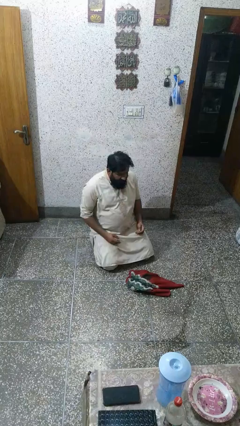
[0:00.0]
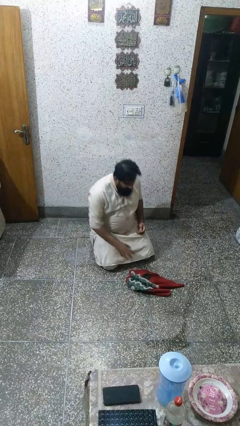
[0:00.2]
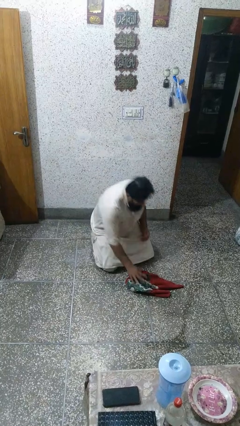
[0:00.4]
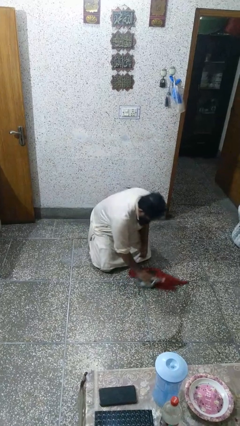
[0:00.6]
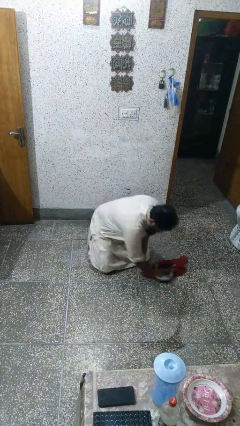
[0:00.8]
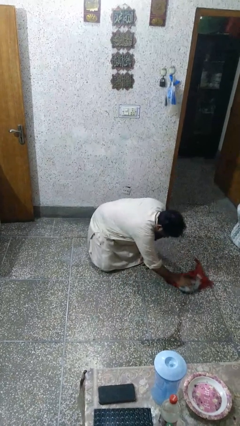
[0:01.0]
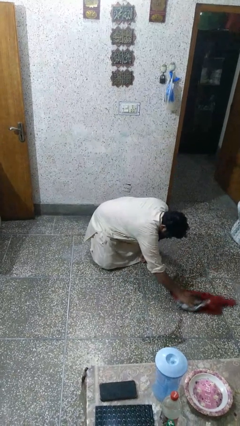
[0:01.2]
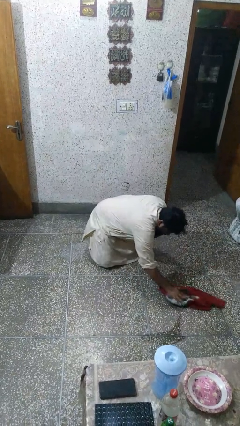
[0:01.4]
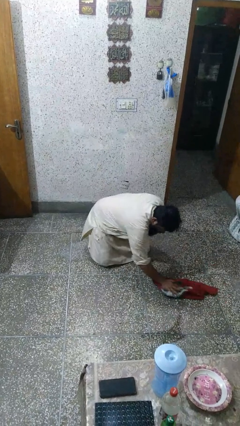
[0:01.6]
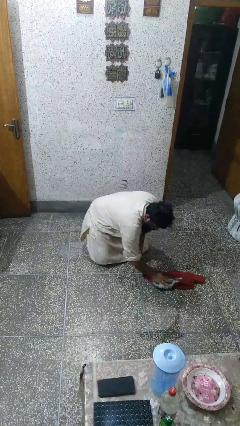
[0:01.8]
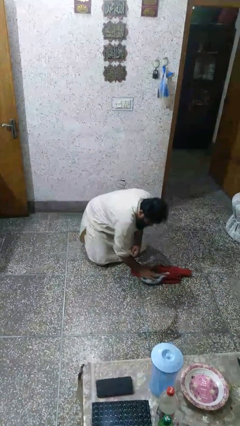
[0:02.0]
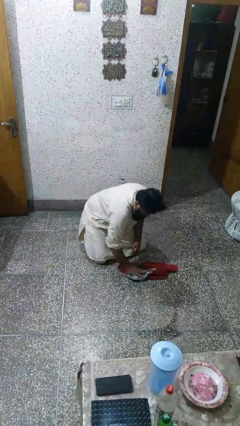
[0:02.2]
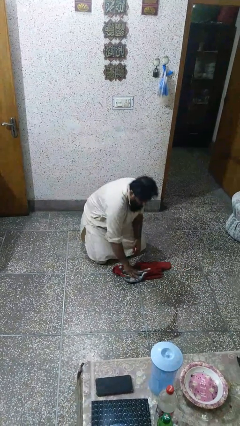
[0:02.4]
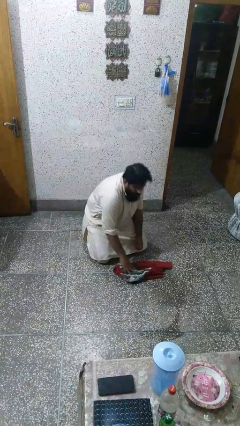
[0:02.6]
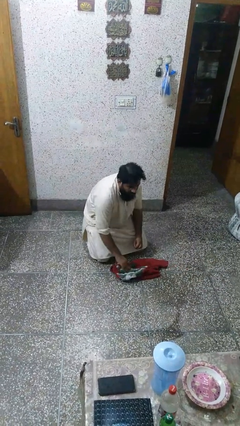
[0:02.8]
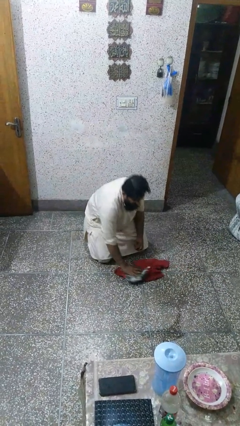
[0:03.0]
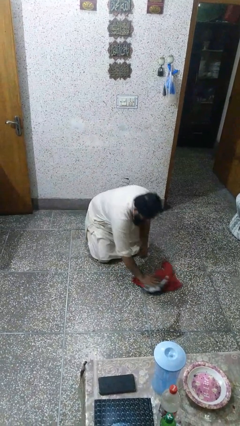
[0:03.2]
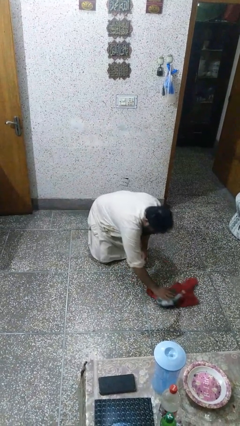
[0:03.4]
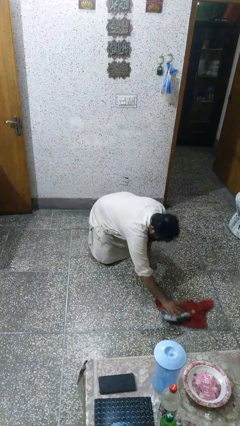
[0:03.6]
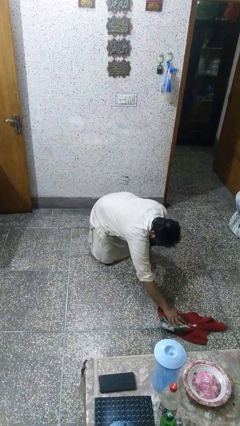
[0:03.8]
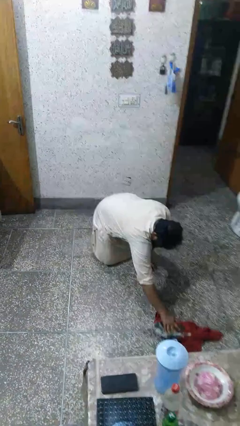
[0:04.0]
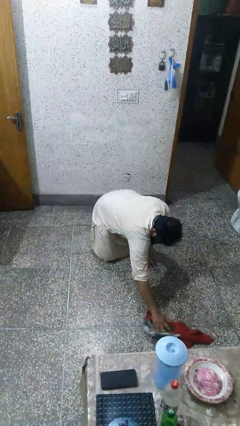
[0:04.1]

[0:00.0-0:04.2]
person mops

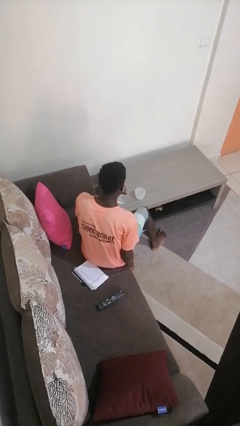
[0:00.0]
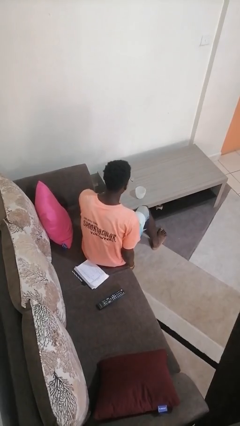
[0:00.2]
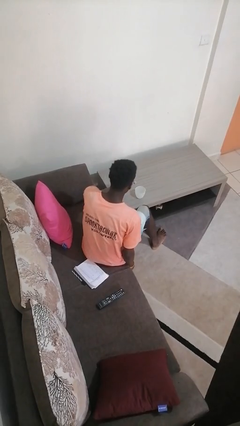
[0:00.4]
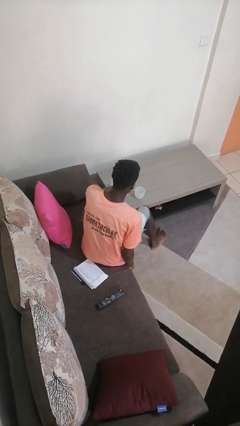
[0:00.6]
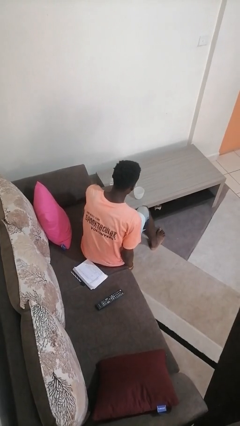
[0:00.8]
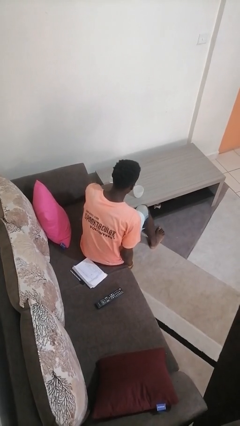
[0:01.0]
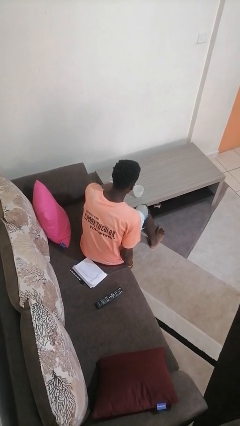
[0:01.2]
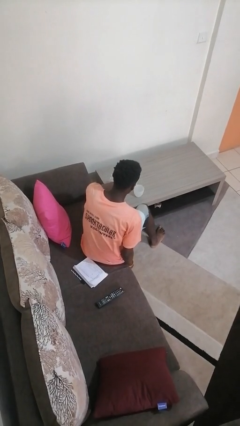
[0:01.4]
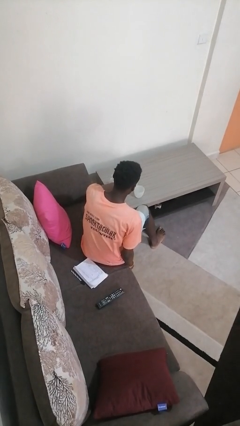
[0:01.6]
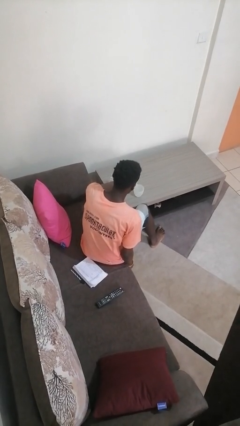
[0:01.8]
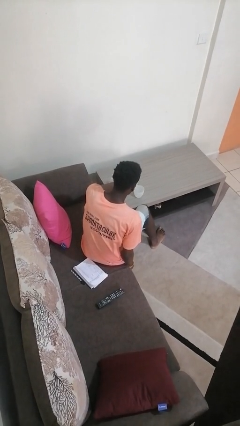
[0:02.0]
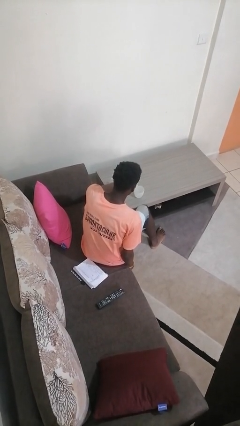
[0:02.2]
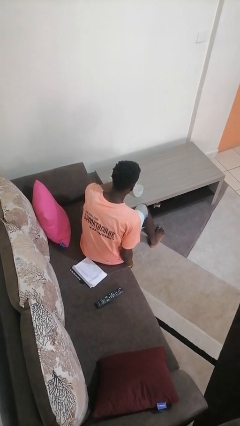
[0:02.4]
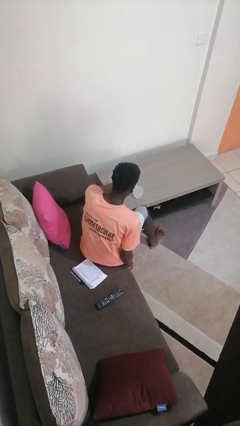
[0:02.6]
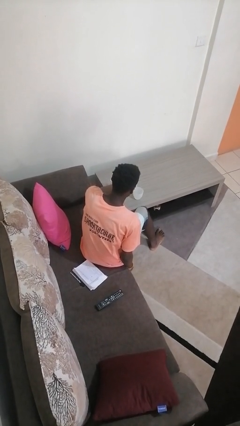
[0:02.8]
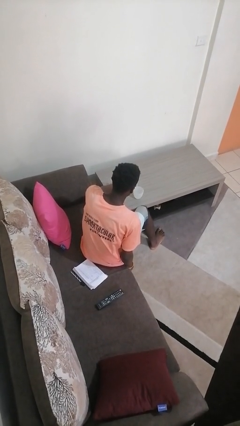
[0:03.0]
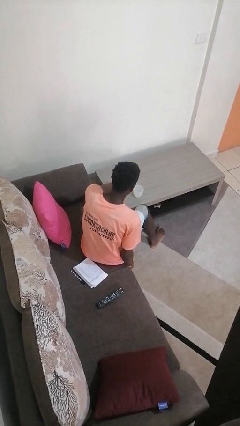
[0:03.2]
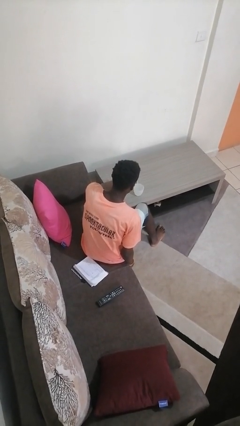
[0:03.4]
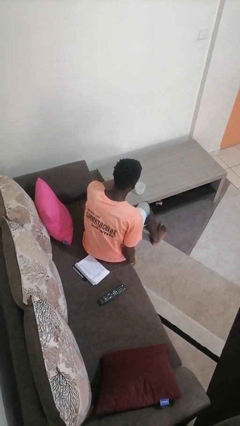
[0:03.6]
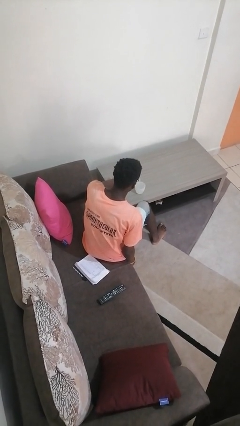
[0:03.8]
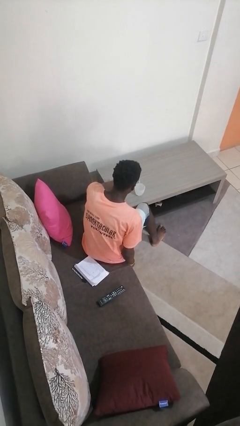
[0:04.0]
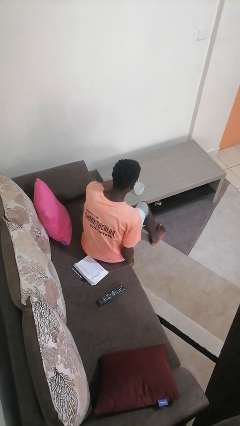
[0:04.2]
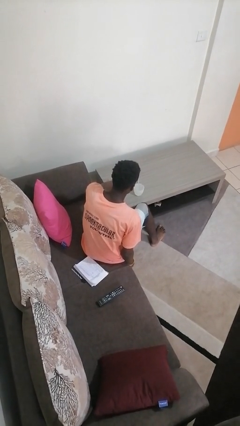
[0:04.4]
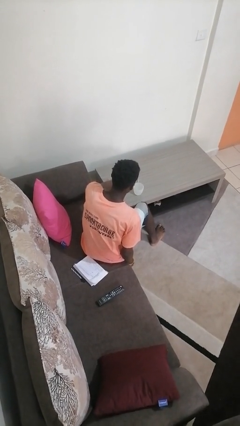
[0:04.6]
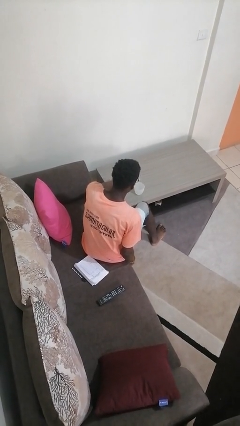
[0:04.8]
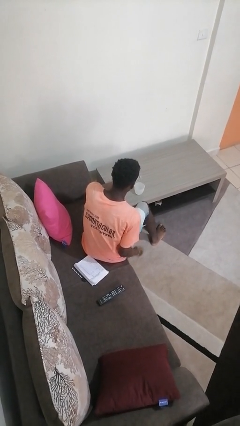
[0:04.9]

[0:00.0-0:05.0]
person pours liquid into cup

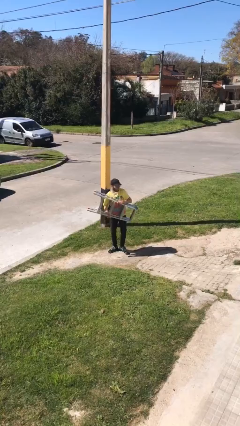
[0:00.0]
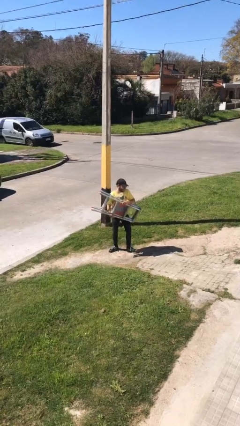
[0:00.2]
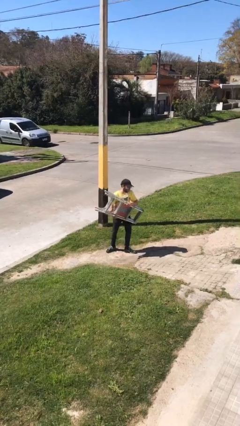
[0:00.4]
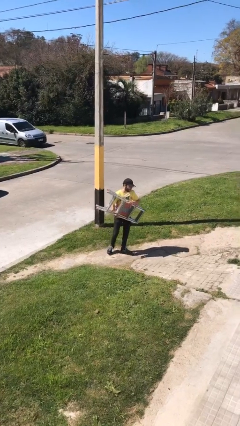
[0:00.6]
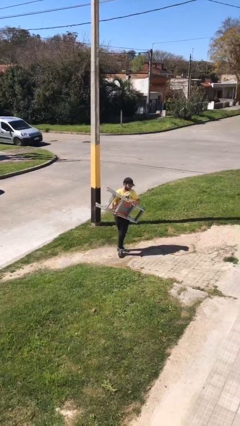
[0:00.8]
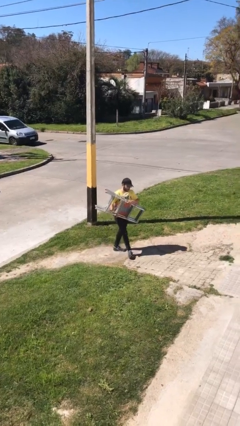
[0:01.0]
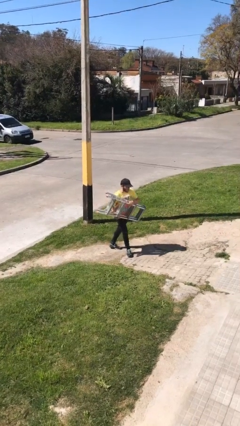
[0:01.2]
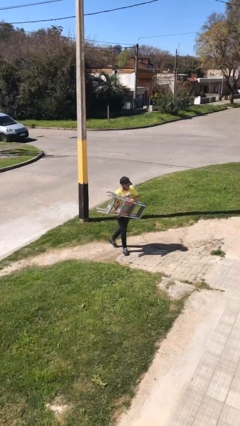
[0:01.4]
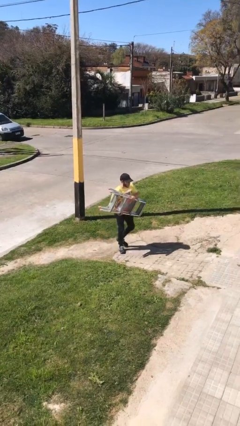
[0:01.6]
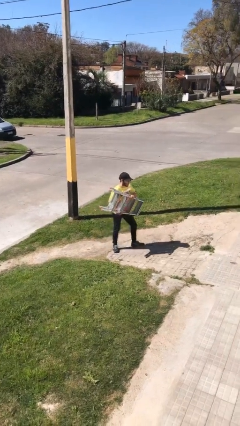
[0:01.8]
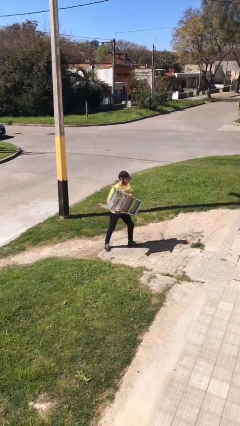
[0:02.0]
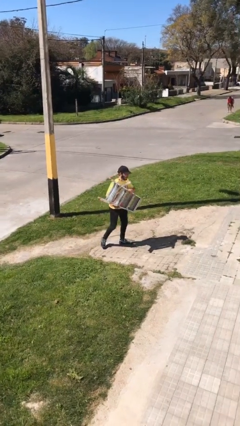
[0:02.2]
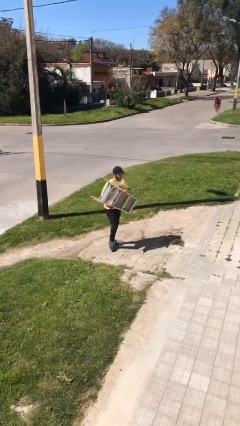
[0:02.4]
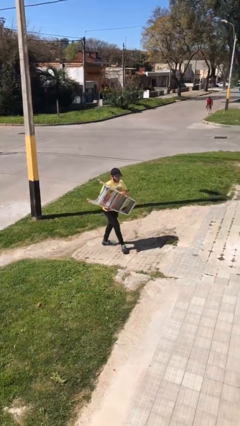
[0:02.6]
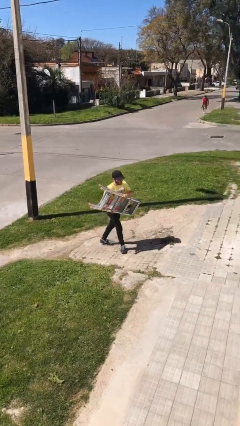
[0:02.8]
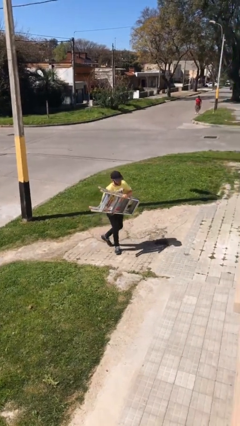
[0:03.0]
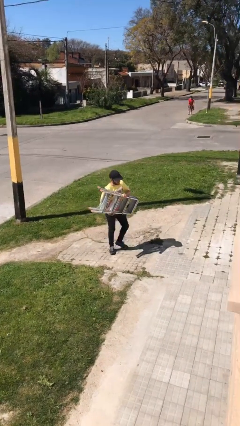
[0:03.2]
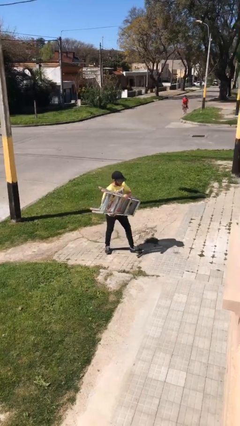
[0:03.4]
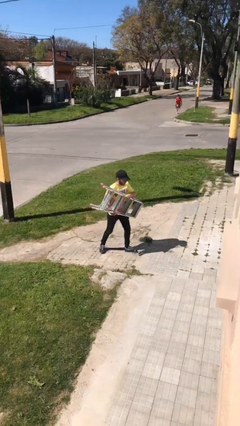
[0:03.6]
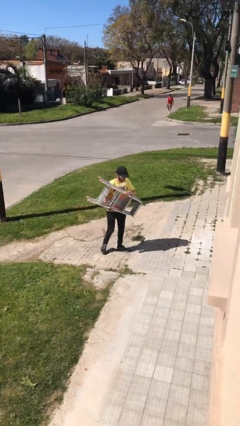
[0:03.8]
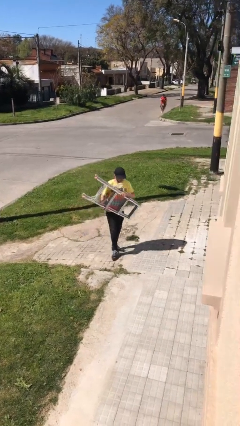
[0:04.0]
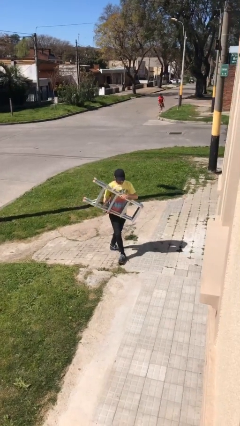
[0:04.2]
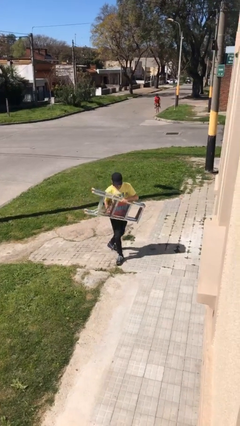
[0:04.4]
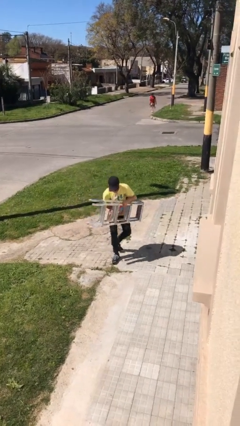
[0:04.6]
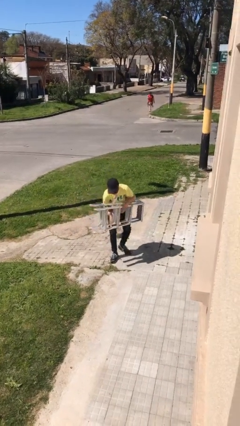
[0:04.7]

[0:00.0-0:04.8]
person carries heavy object

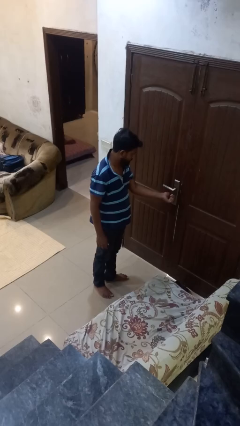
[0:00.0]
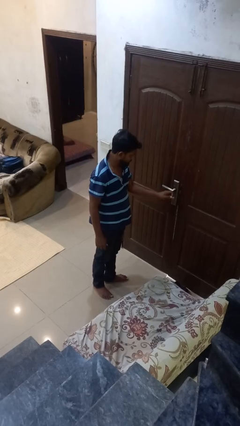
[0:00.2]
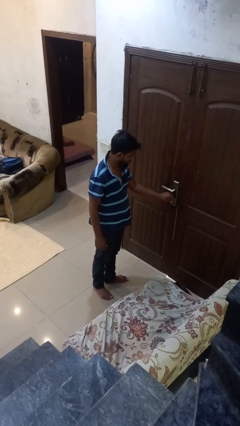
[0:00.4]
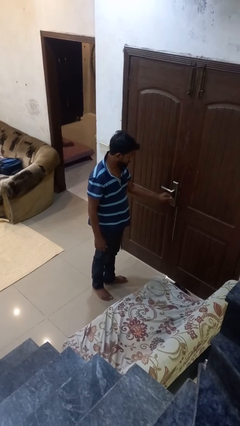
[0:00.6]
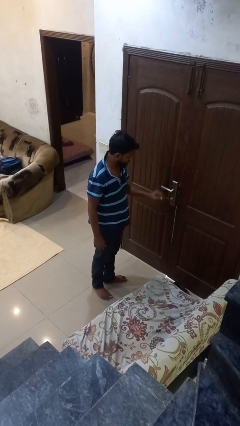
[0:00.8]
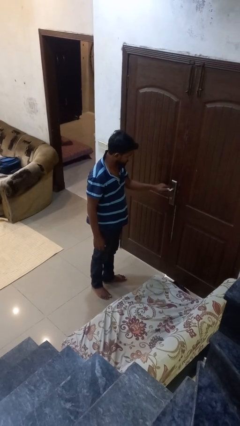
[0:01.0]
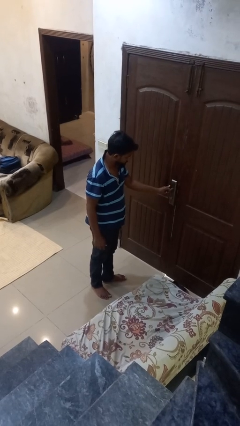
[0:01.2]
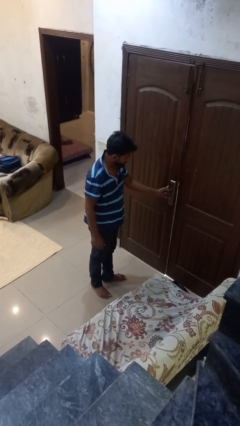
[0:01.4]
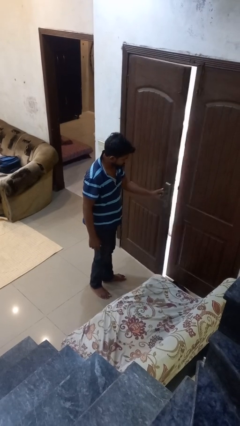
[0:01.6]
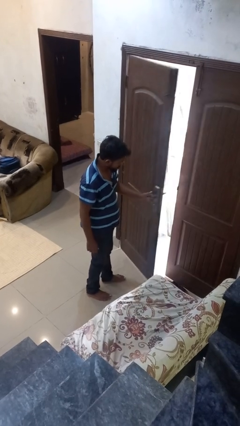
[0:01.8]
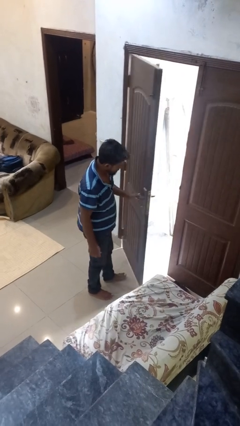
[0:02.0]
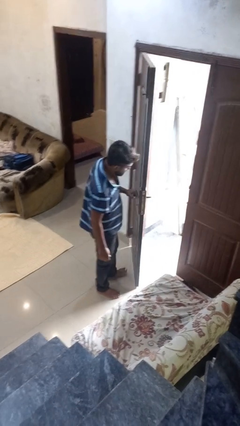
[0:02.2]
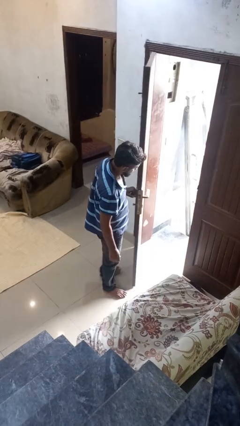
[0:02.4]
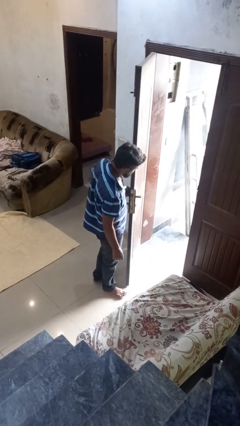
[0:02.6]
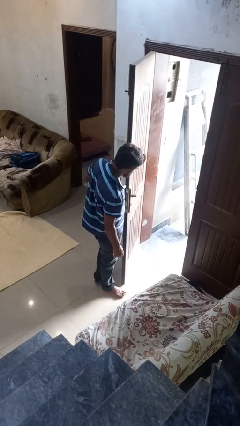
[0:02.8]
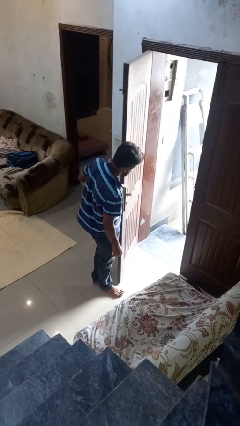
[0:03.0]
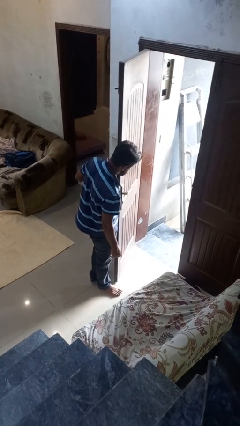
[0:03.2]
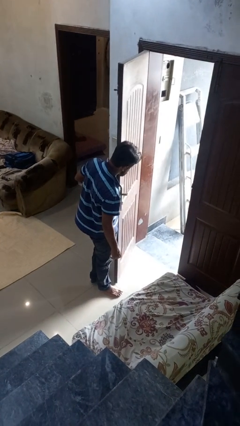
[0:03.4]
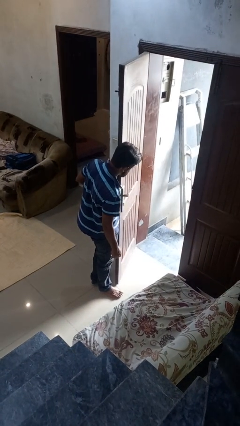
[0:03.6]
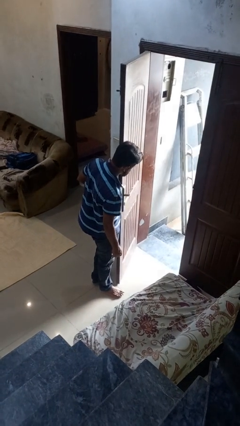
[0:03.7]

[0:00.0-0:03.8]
person opens facility door
